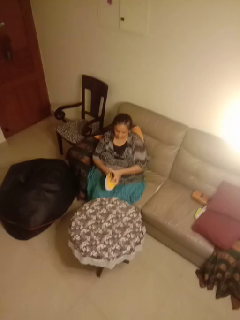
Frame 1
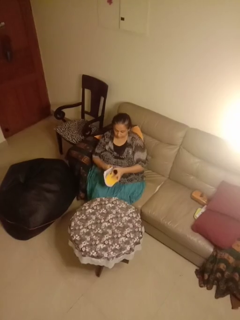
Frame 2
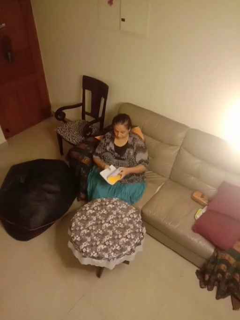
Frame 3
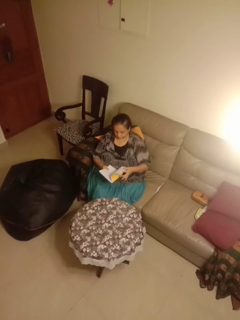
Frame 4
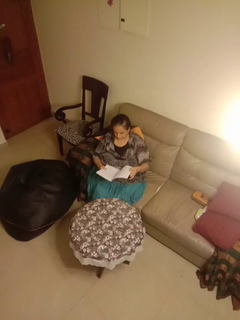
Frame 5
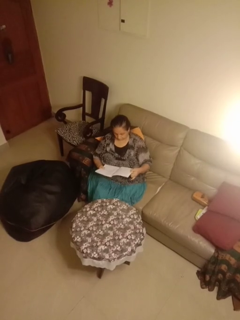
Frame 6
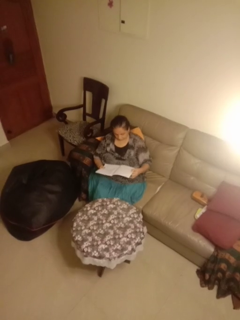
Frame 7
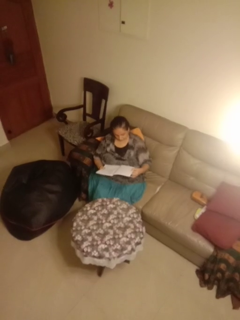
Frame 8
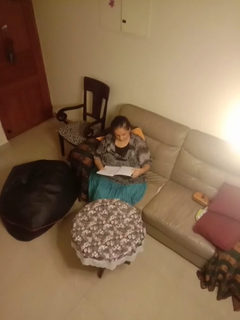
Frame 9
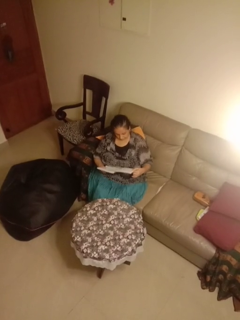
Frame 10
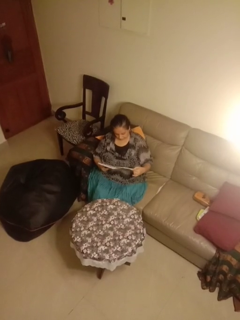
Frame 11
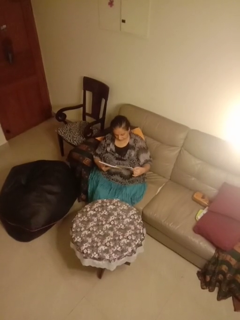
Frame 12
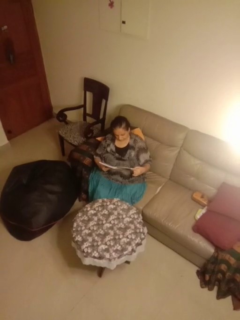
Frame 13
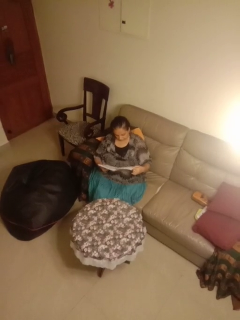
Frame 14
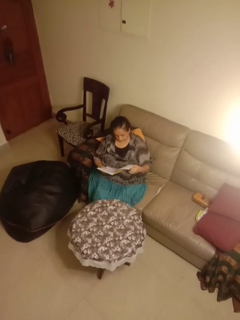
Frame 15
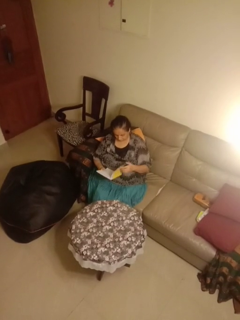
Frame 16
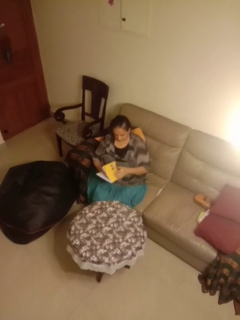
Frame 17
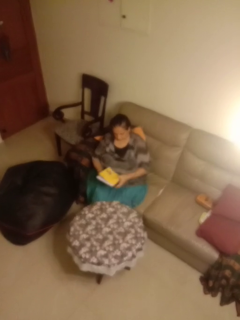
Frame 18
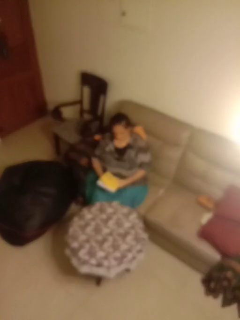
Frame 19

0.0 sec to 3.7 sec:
person reads magazine

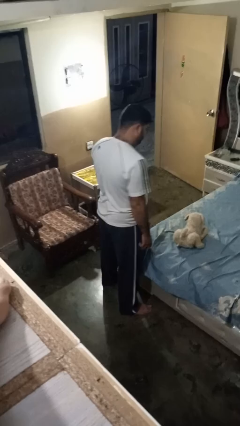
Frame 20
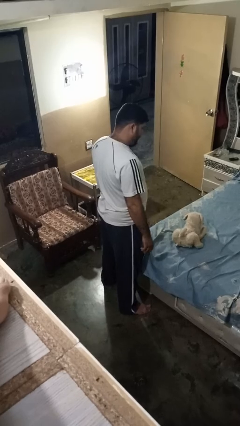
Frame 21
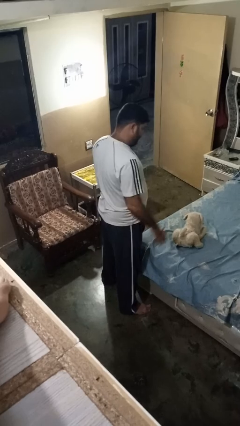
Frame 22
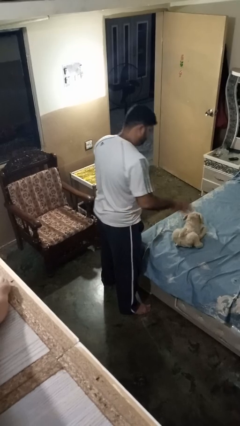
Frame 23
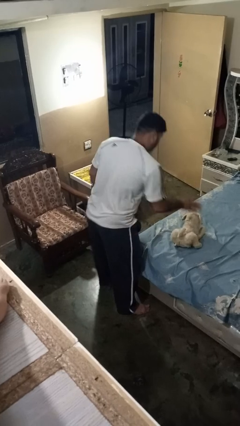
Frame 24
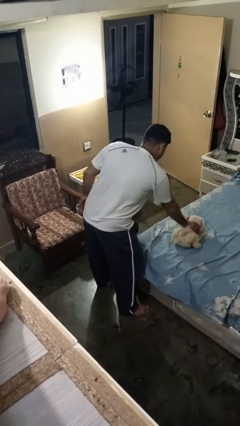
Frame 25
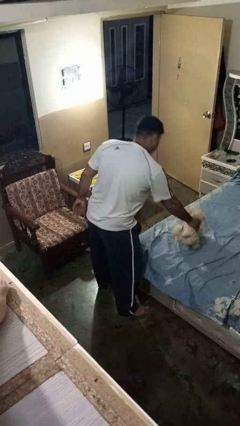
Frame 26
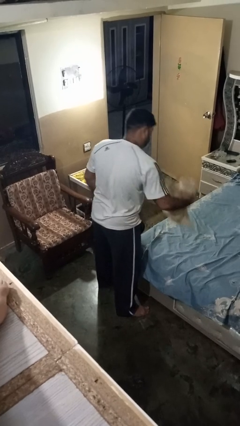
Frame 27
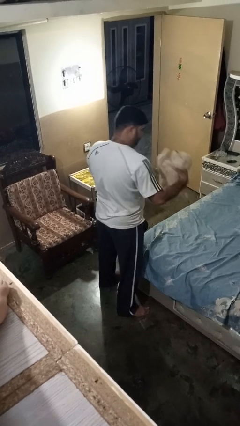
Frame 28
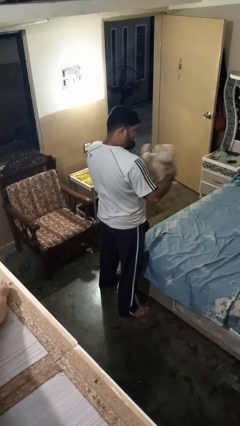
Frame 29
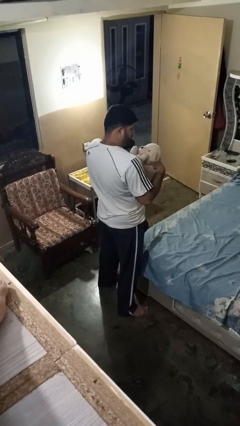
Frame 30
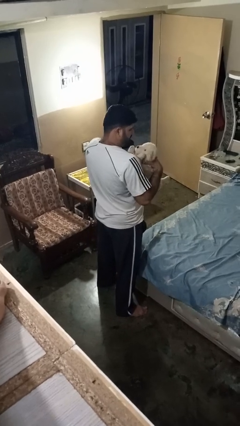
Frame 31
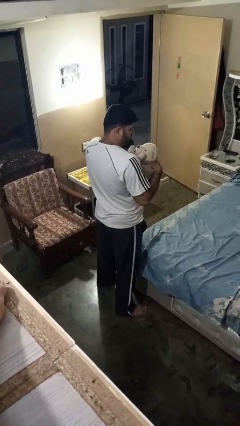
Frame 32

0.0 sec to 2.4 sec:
person hugs stuffed animal

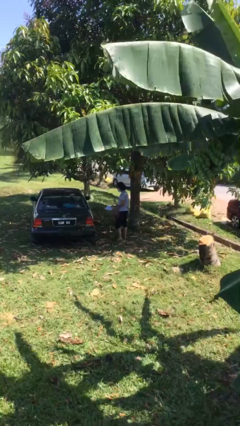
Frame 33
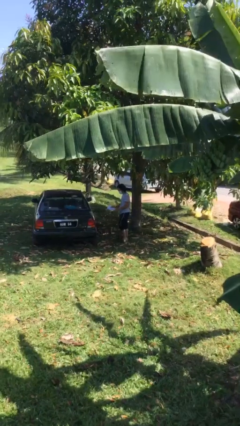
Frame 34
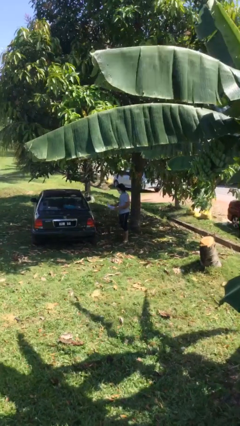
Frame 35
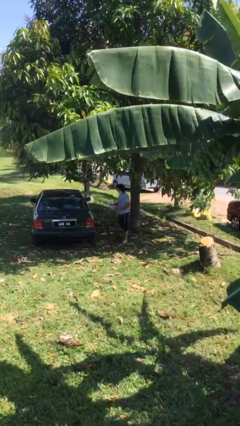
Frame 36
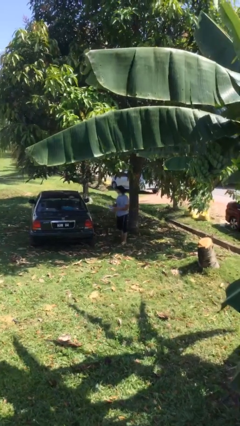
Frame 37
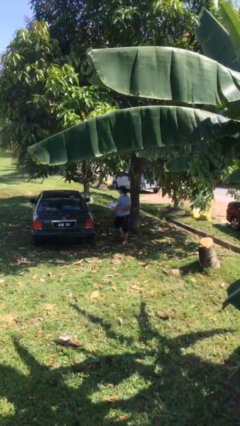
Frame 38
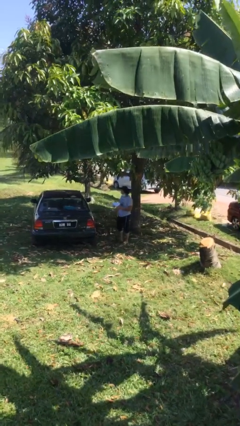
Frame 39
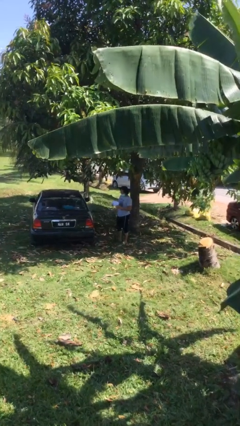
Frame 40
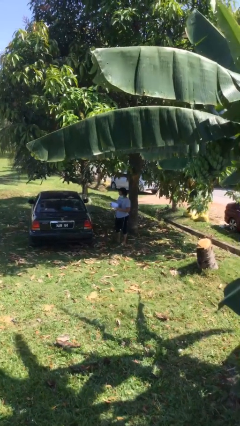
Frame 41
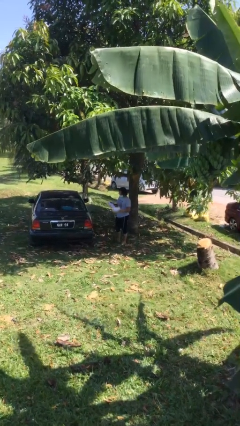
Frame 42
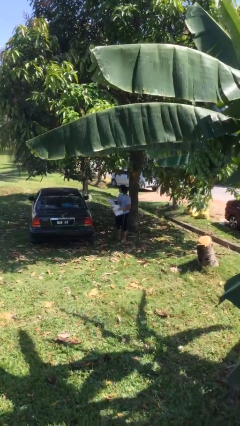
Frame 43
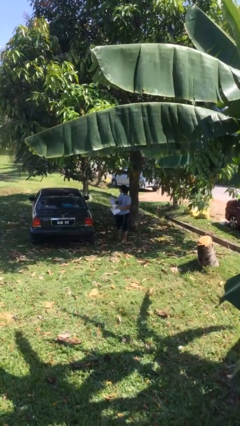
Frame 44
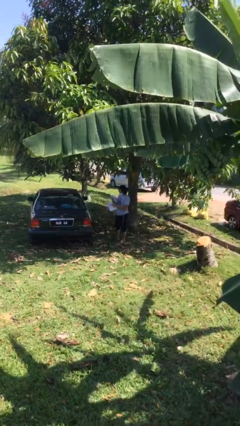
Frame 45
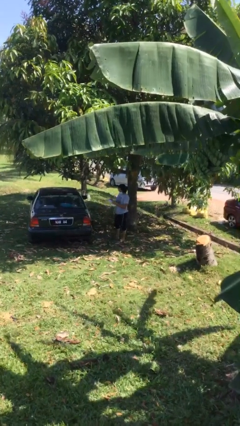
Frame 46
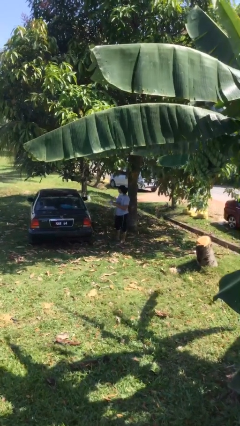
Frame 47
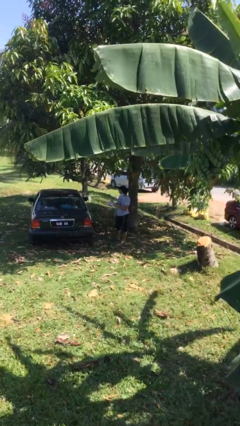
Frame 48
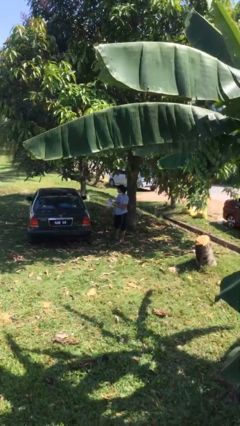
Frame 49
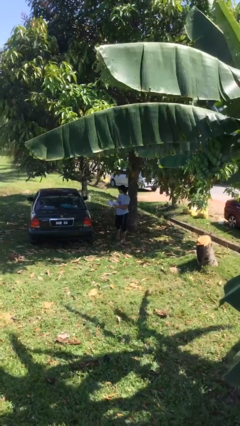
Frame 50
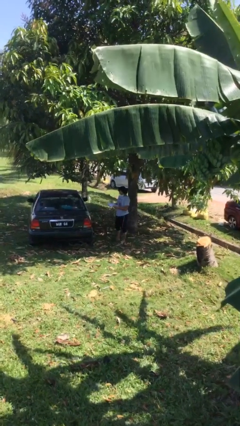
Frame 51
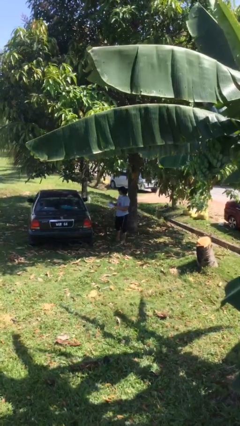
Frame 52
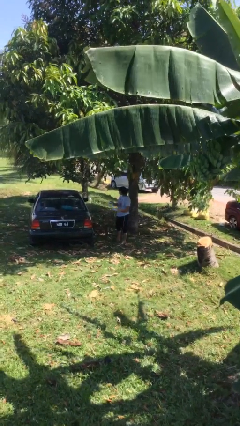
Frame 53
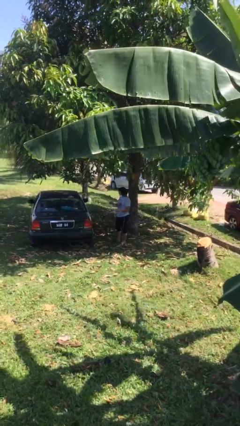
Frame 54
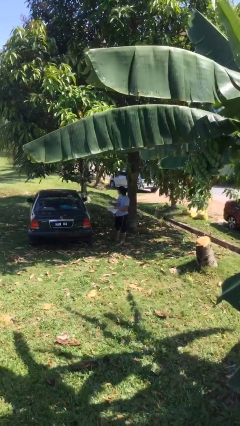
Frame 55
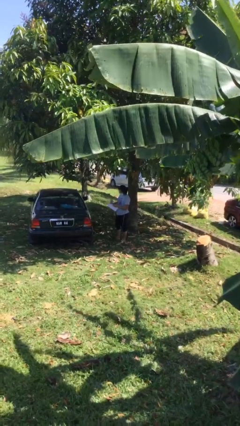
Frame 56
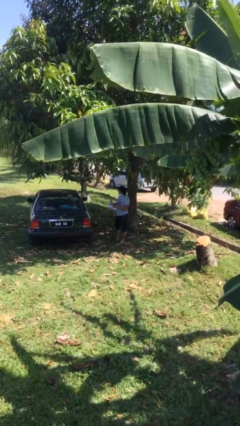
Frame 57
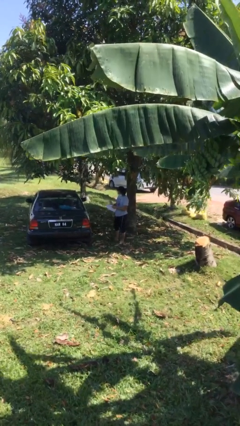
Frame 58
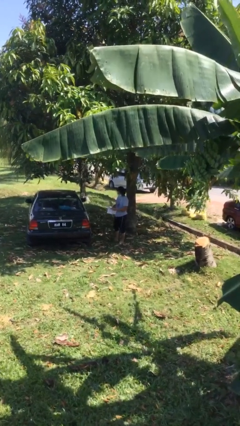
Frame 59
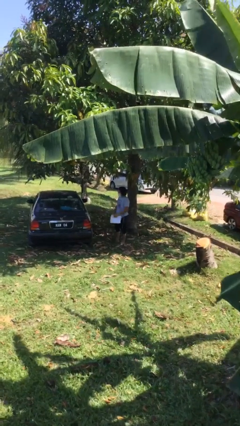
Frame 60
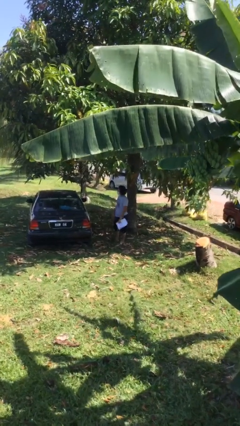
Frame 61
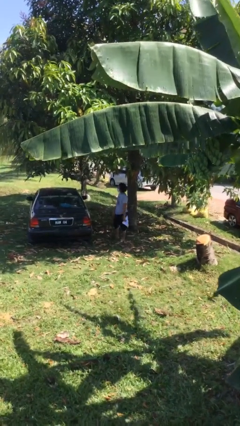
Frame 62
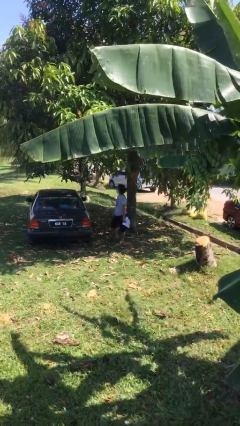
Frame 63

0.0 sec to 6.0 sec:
person reads document

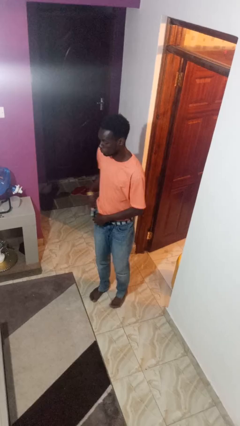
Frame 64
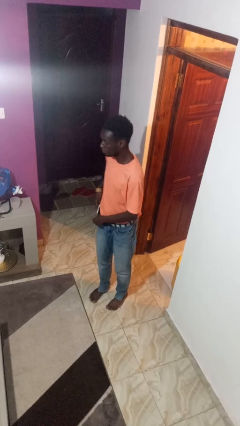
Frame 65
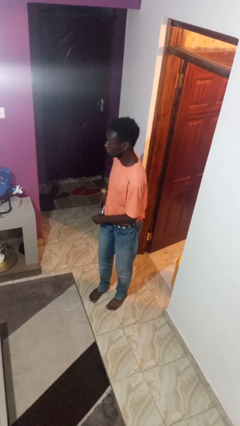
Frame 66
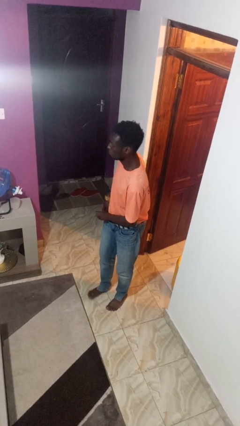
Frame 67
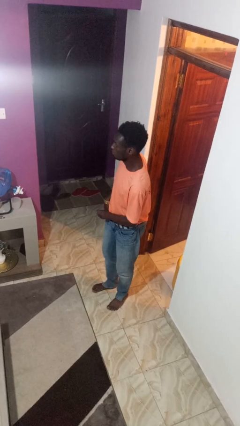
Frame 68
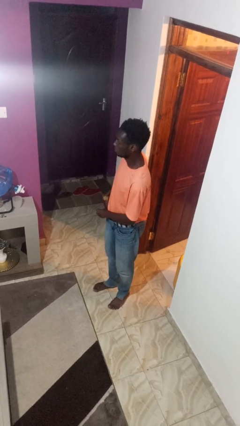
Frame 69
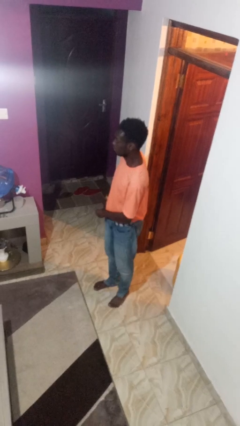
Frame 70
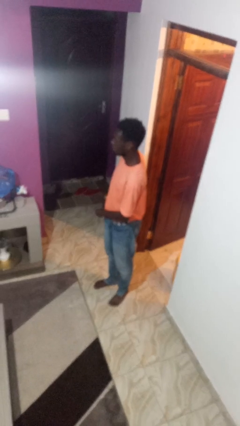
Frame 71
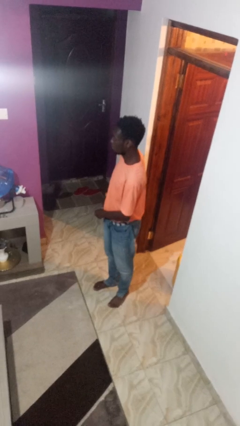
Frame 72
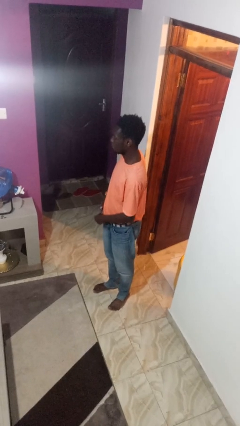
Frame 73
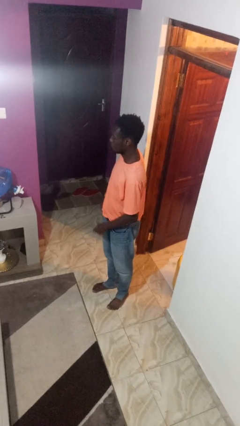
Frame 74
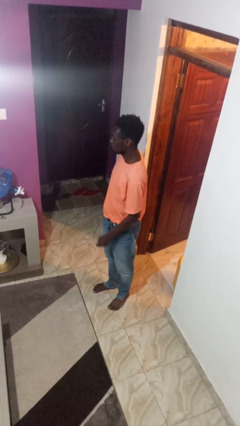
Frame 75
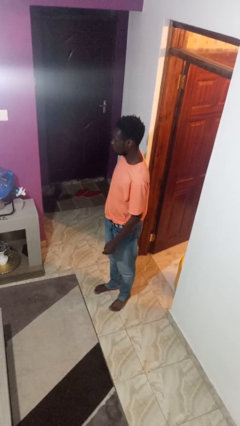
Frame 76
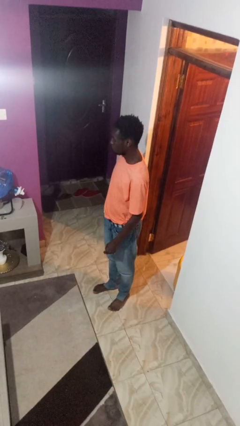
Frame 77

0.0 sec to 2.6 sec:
person puts phone into pocket

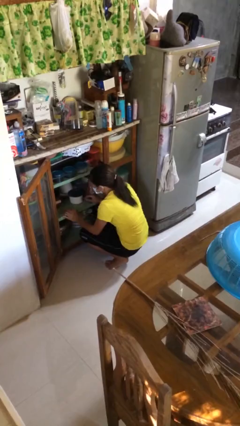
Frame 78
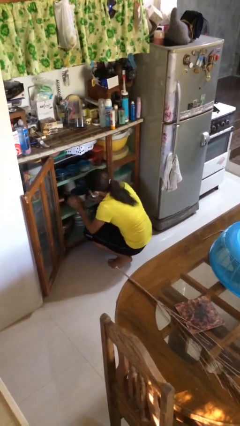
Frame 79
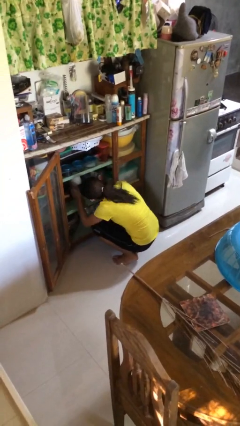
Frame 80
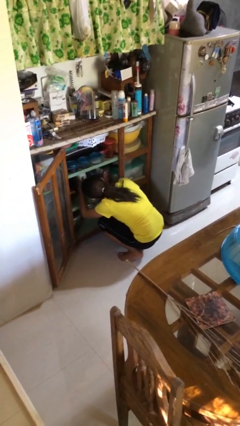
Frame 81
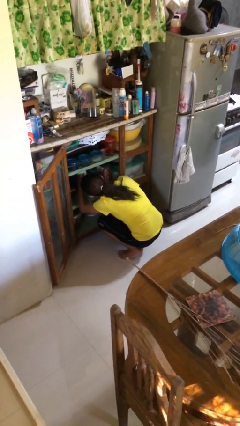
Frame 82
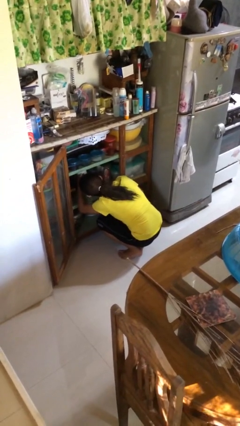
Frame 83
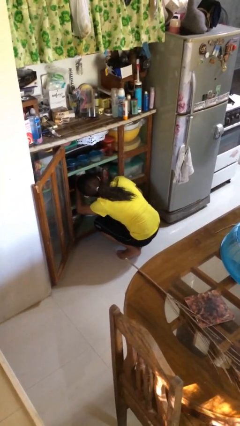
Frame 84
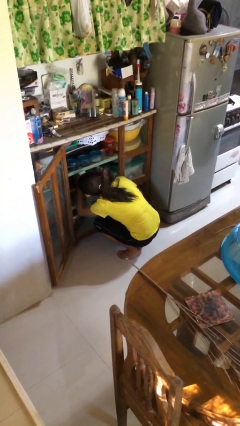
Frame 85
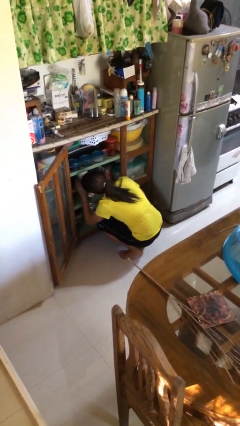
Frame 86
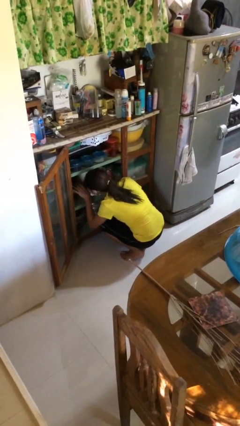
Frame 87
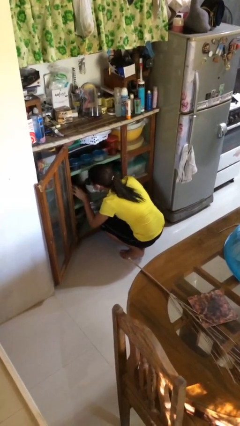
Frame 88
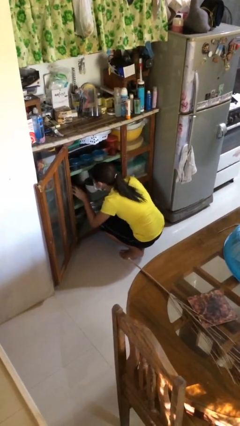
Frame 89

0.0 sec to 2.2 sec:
person searches in cabinet

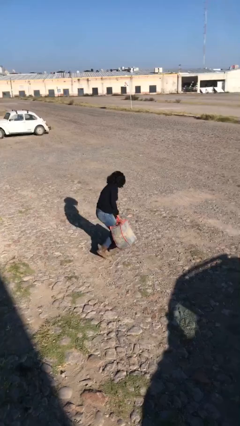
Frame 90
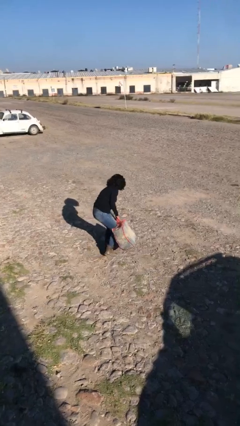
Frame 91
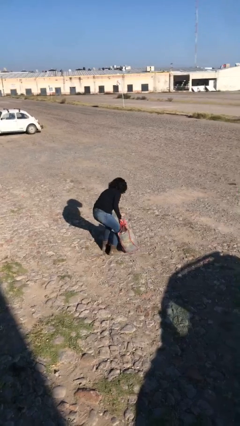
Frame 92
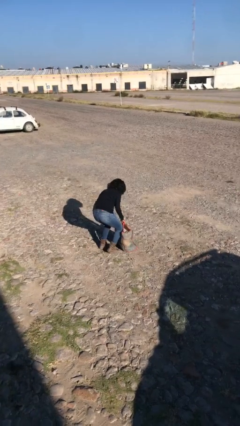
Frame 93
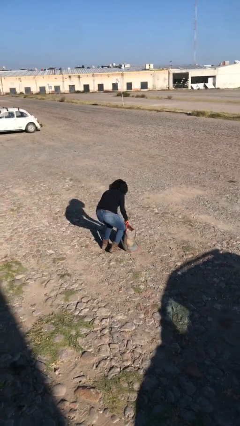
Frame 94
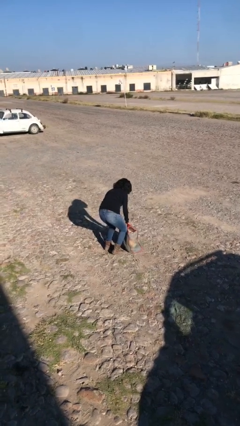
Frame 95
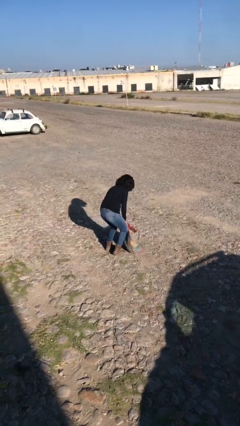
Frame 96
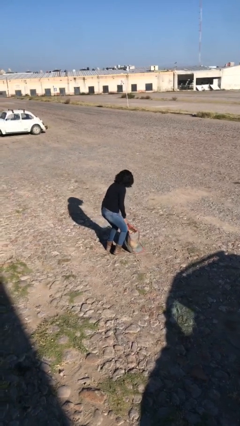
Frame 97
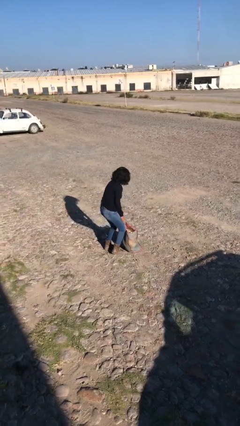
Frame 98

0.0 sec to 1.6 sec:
person puts down object on floor
